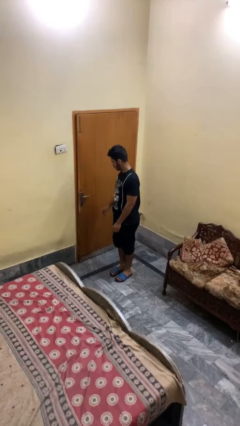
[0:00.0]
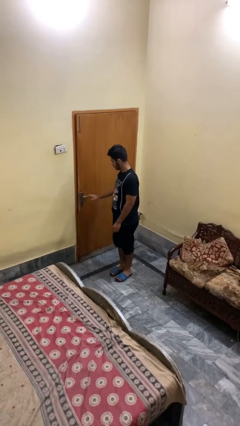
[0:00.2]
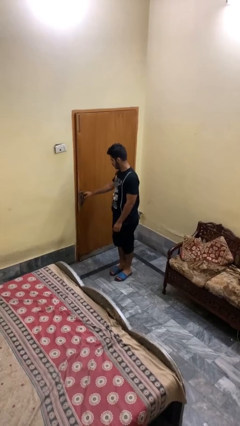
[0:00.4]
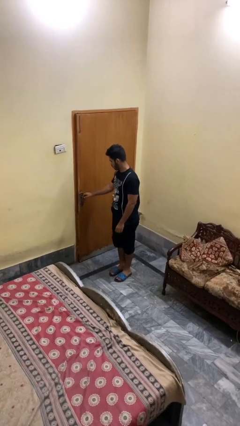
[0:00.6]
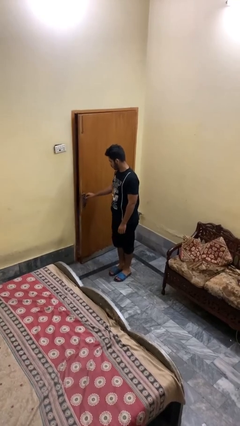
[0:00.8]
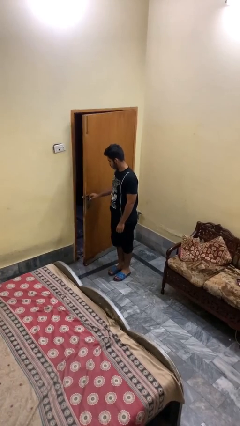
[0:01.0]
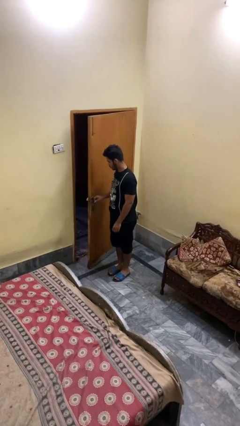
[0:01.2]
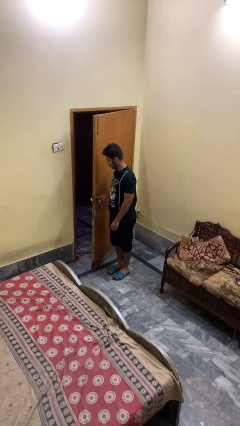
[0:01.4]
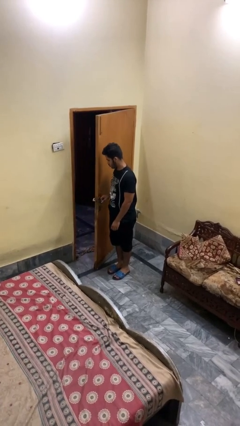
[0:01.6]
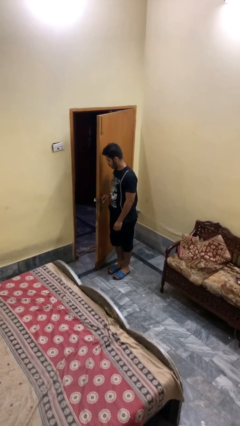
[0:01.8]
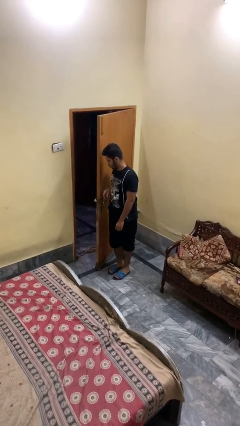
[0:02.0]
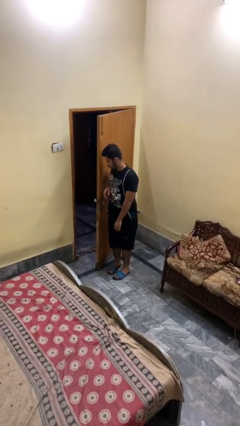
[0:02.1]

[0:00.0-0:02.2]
person opens facility door

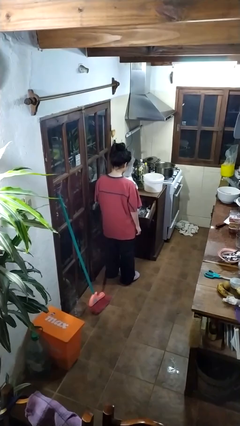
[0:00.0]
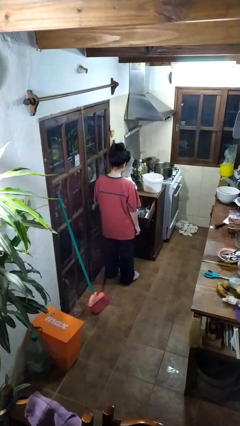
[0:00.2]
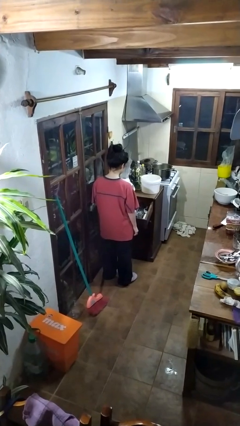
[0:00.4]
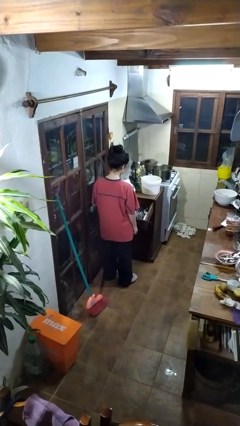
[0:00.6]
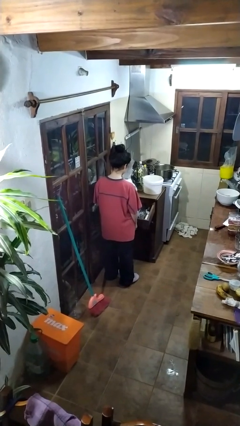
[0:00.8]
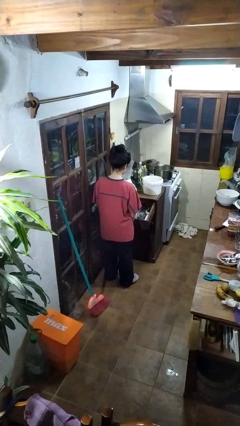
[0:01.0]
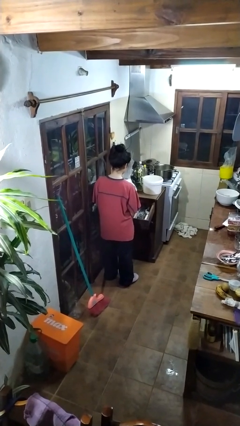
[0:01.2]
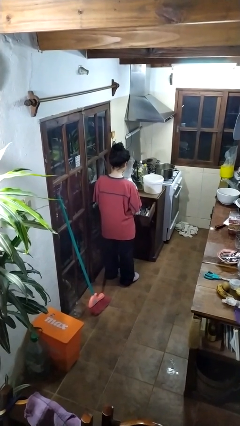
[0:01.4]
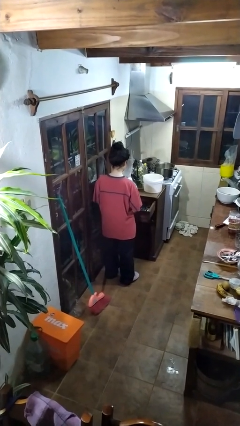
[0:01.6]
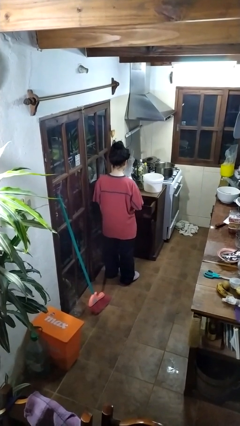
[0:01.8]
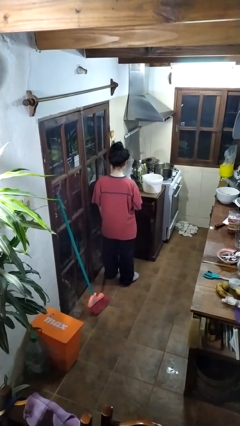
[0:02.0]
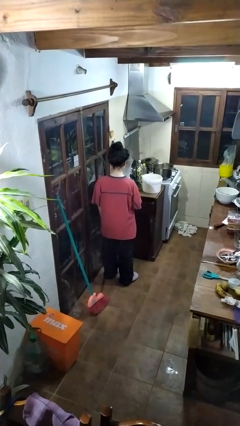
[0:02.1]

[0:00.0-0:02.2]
person closes kitchen drawer

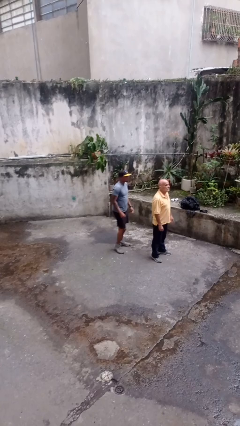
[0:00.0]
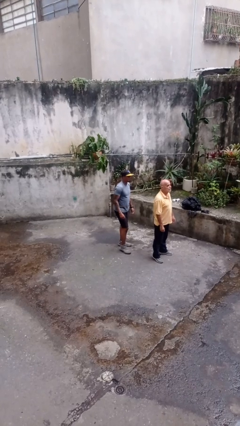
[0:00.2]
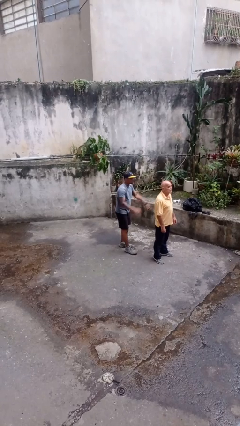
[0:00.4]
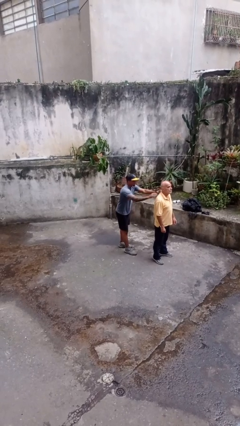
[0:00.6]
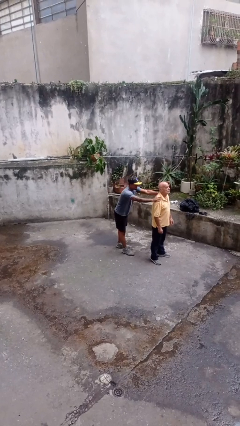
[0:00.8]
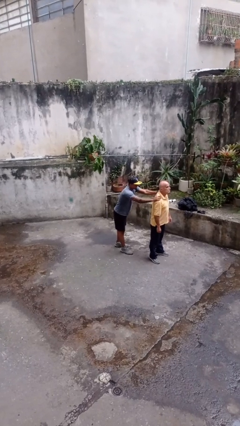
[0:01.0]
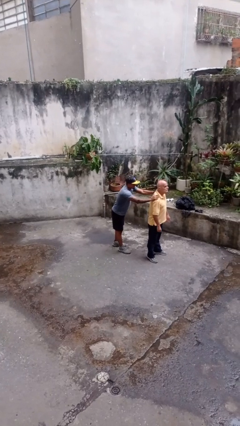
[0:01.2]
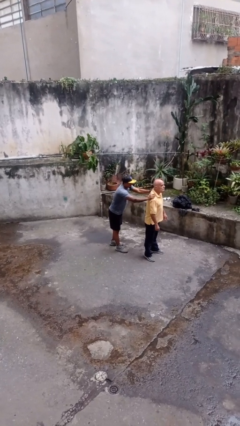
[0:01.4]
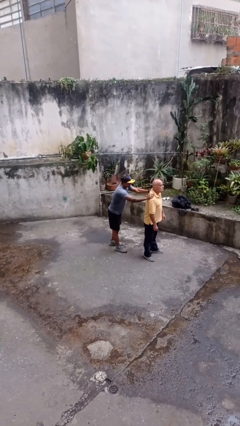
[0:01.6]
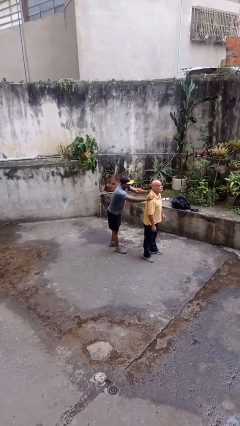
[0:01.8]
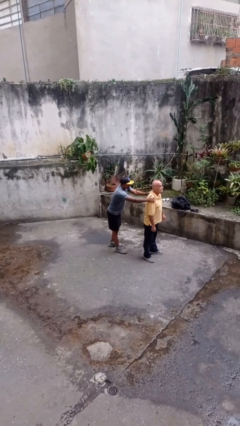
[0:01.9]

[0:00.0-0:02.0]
person grabs person by shoulder

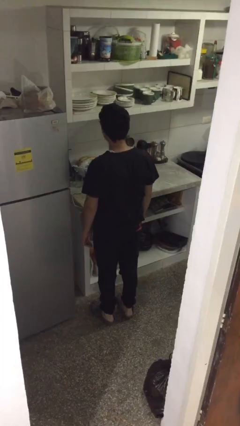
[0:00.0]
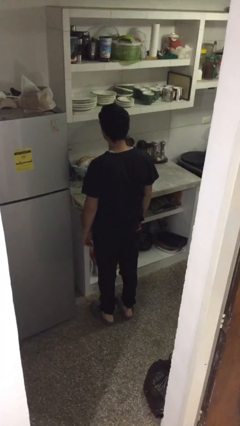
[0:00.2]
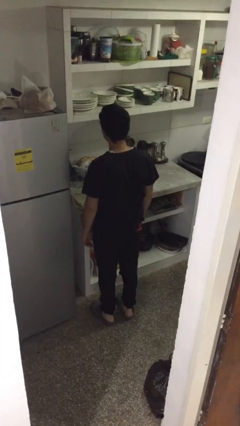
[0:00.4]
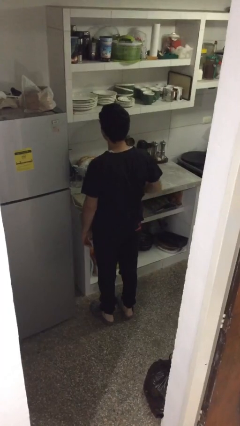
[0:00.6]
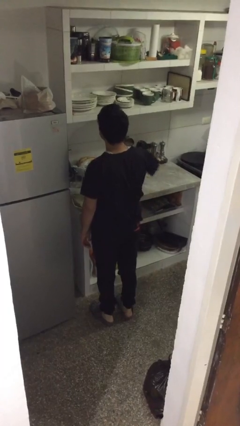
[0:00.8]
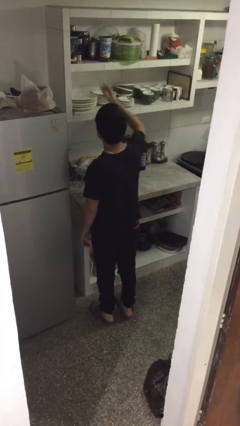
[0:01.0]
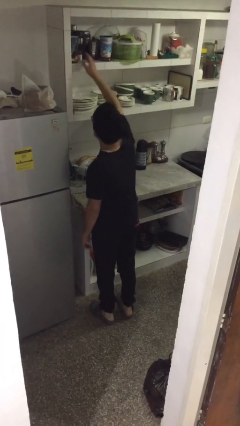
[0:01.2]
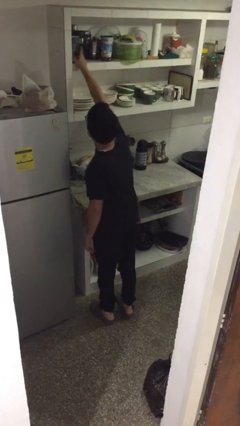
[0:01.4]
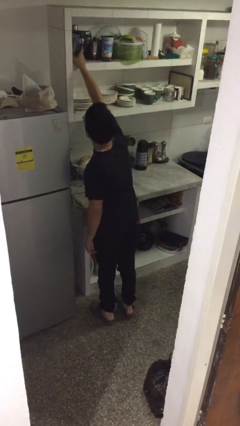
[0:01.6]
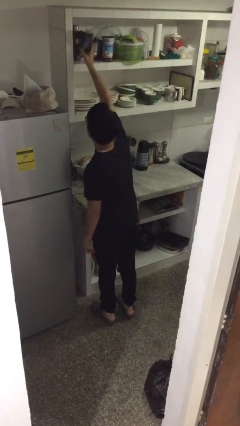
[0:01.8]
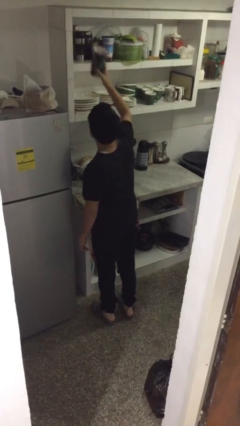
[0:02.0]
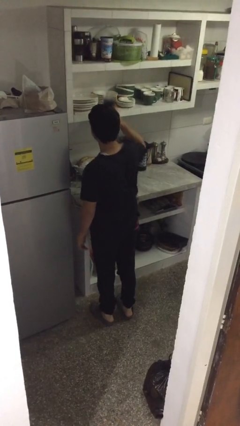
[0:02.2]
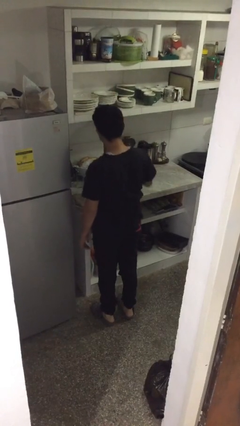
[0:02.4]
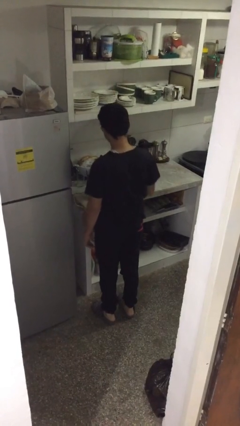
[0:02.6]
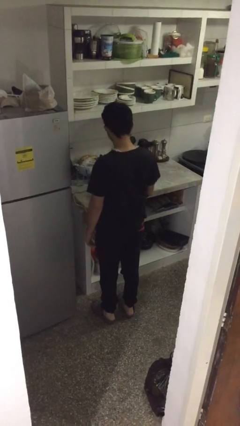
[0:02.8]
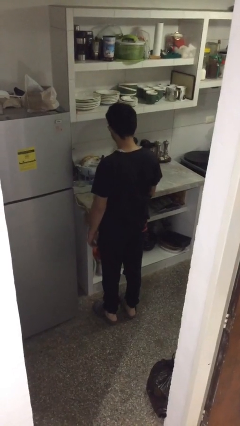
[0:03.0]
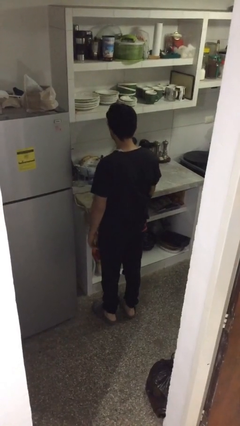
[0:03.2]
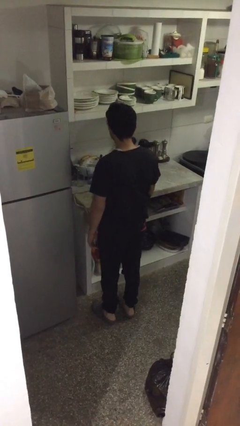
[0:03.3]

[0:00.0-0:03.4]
person picks up object from shelf

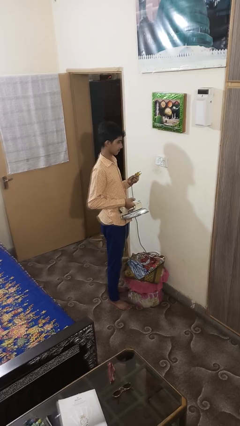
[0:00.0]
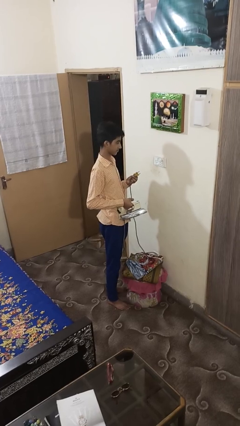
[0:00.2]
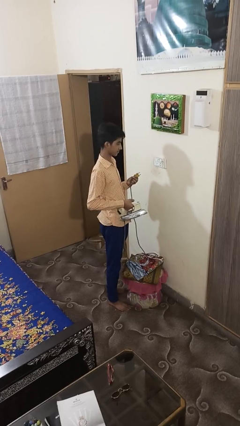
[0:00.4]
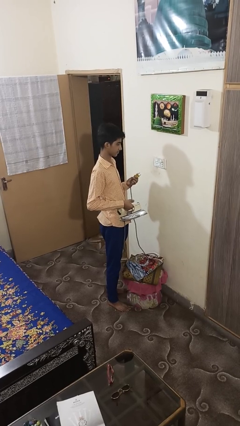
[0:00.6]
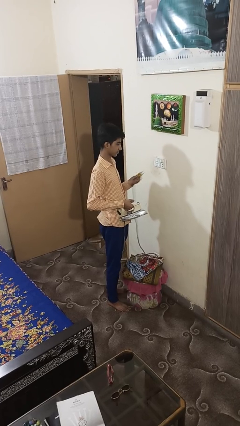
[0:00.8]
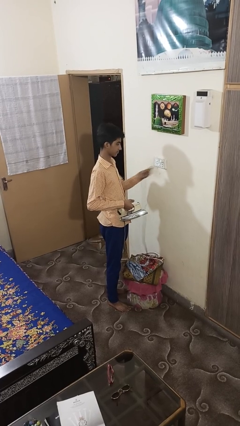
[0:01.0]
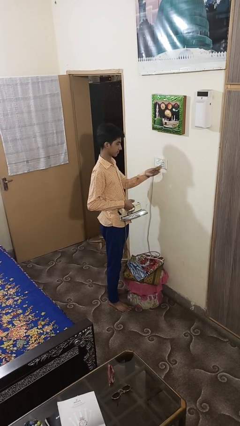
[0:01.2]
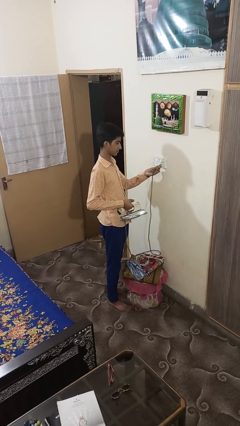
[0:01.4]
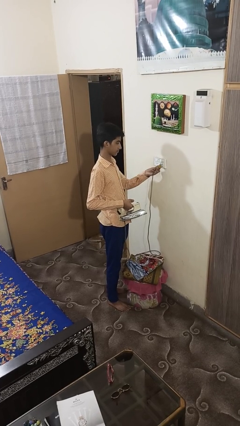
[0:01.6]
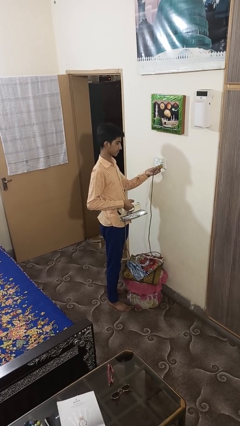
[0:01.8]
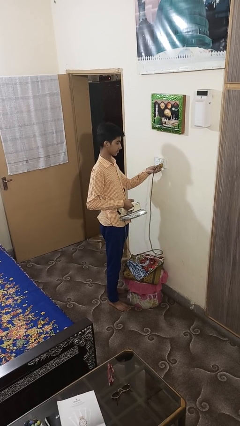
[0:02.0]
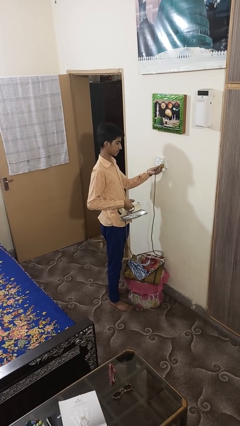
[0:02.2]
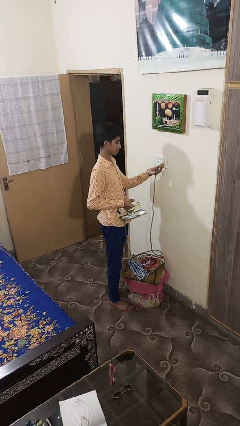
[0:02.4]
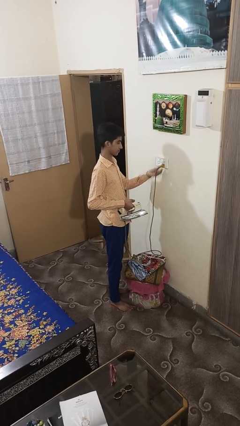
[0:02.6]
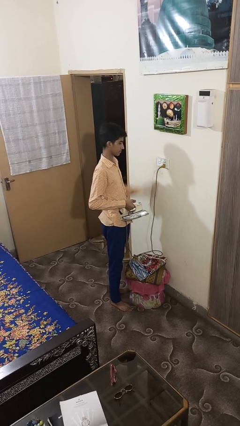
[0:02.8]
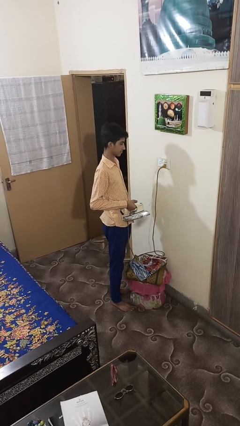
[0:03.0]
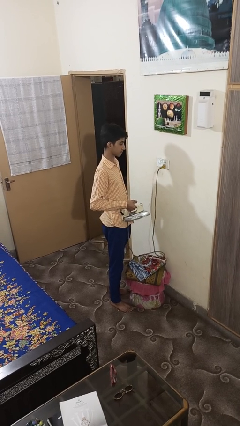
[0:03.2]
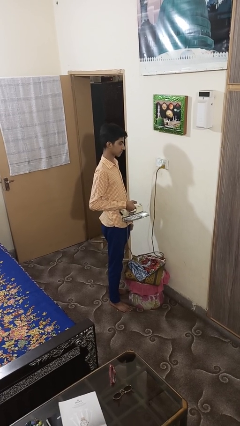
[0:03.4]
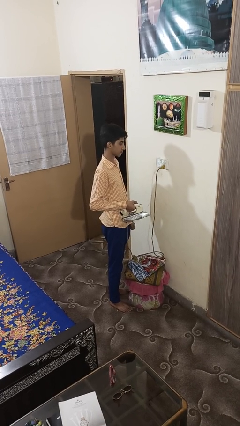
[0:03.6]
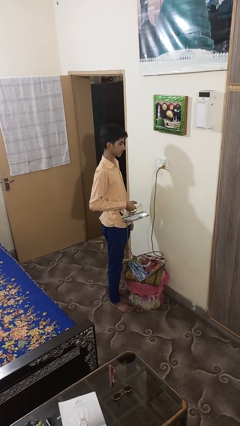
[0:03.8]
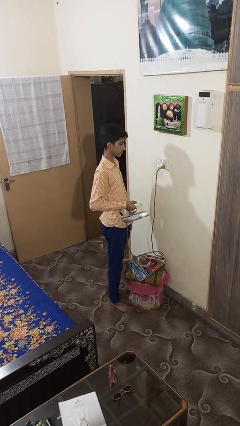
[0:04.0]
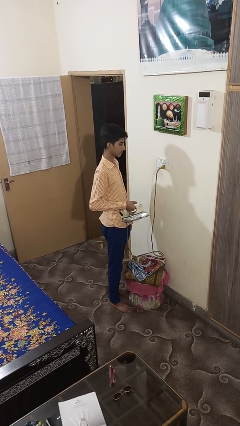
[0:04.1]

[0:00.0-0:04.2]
person plugs into electrical socket

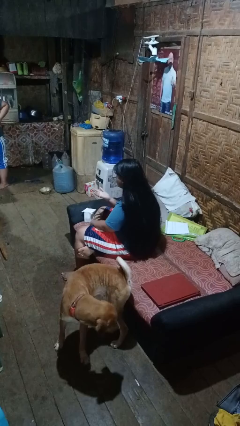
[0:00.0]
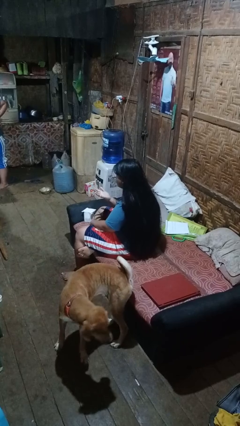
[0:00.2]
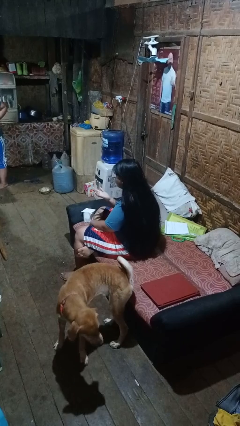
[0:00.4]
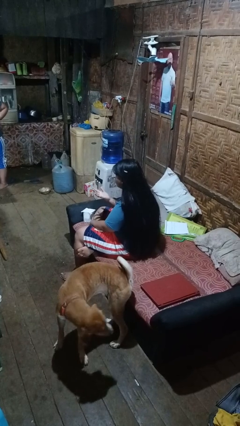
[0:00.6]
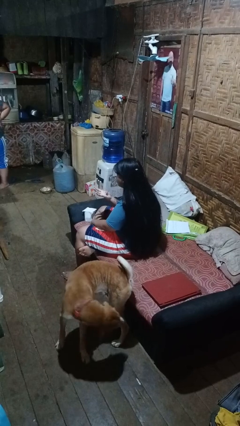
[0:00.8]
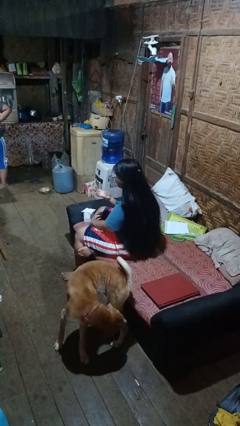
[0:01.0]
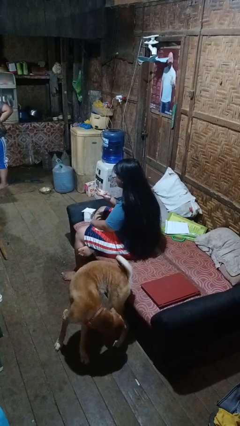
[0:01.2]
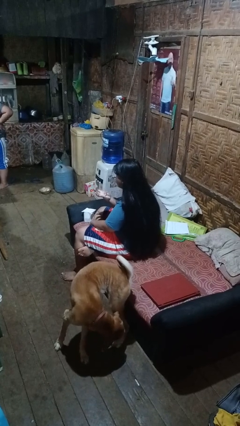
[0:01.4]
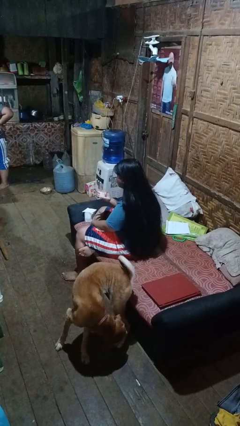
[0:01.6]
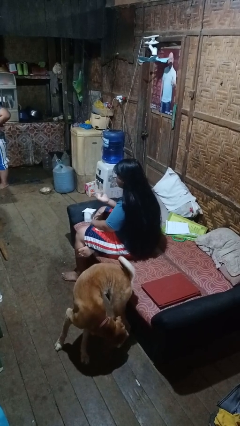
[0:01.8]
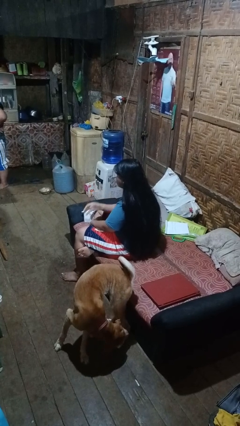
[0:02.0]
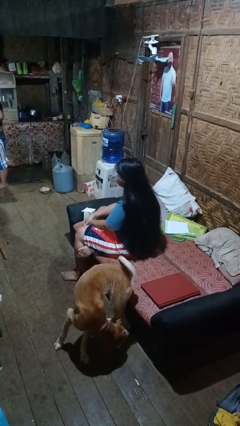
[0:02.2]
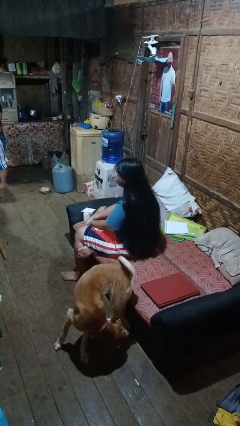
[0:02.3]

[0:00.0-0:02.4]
person looks at hands in lap

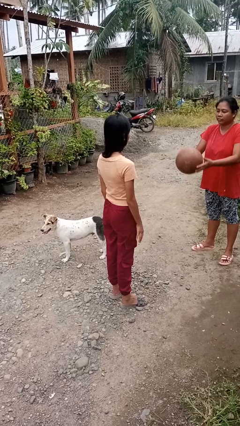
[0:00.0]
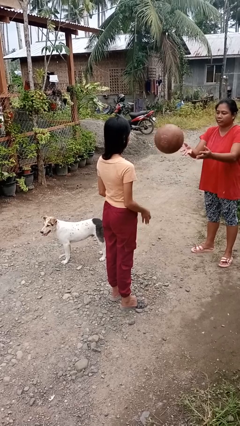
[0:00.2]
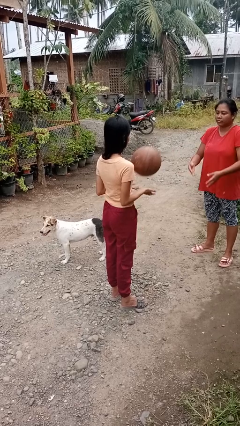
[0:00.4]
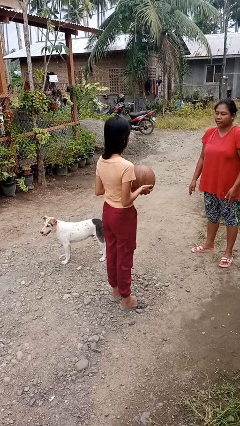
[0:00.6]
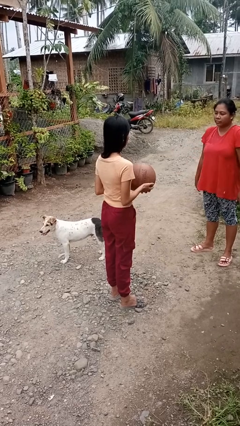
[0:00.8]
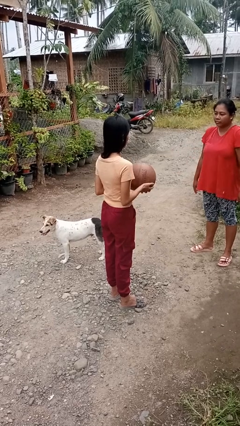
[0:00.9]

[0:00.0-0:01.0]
person catches object from person
